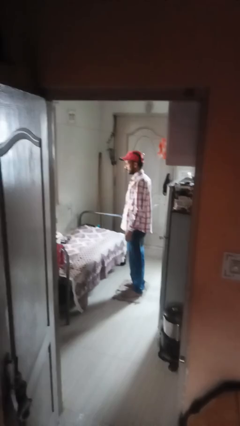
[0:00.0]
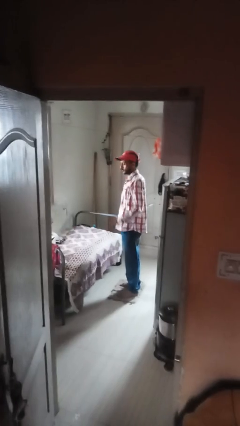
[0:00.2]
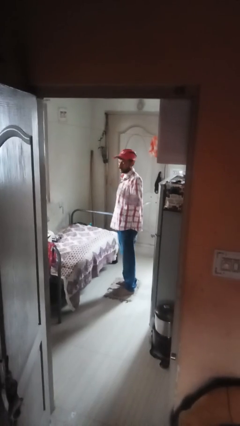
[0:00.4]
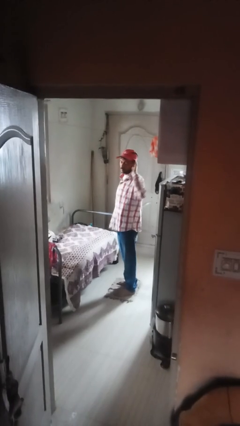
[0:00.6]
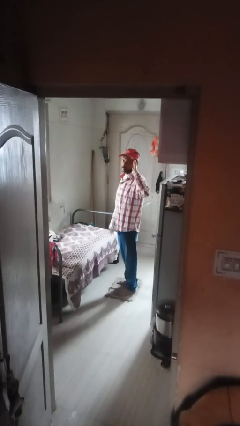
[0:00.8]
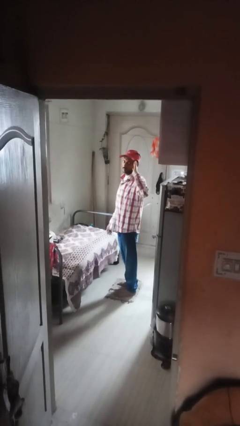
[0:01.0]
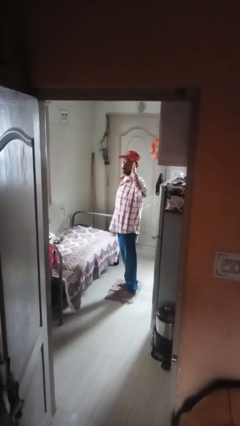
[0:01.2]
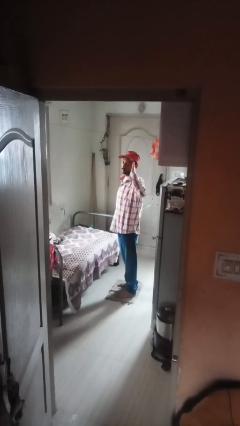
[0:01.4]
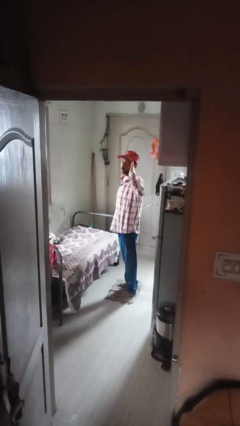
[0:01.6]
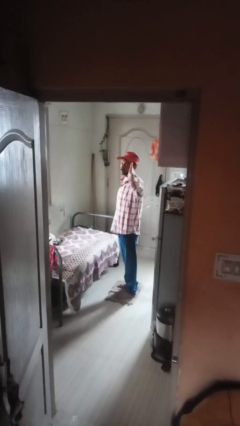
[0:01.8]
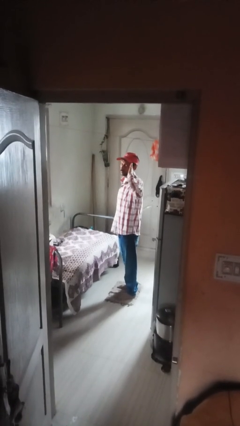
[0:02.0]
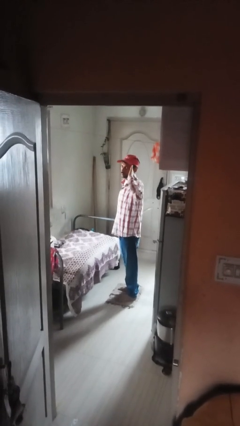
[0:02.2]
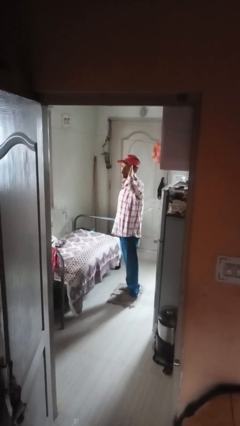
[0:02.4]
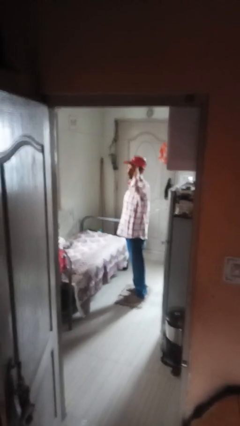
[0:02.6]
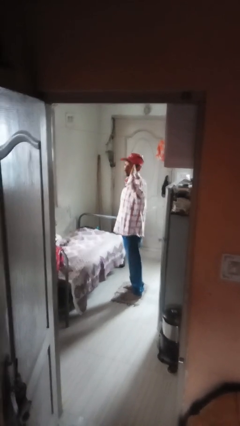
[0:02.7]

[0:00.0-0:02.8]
person salutes

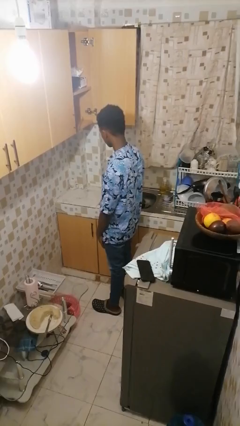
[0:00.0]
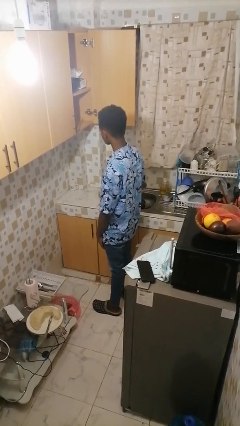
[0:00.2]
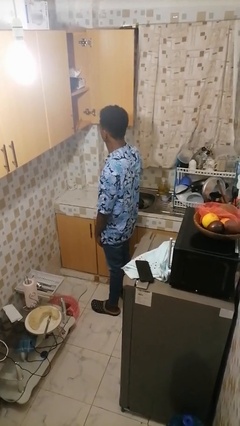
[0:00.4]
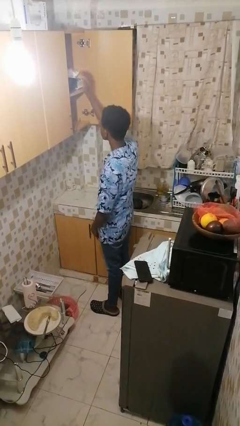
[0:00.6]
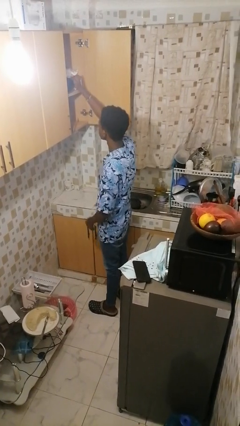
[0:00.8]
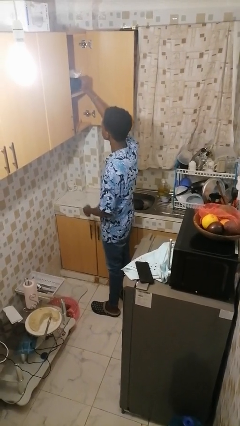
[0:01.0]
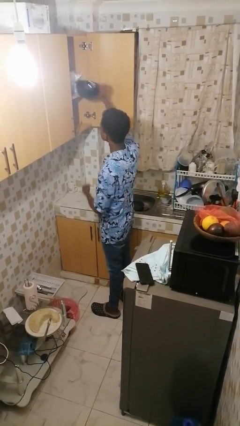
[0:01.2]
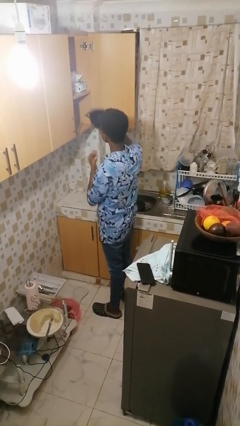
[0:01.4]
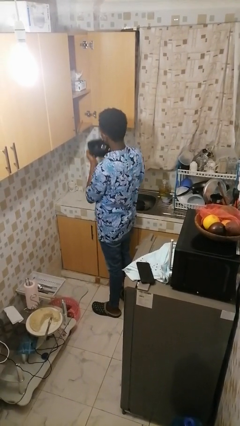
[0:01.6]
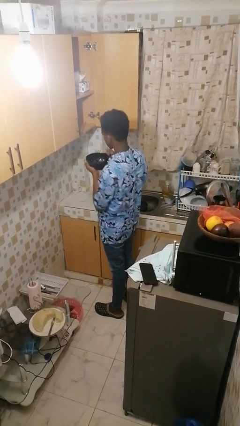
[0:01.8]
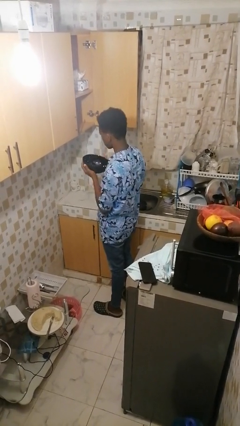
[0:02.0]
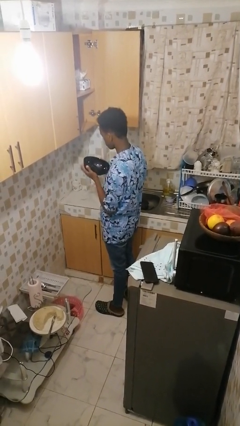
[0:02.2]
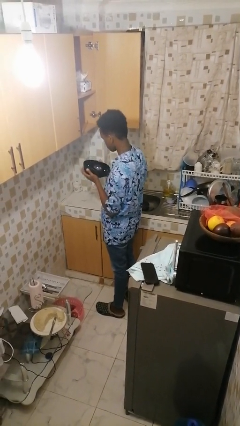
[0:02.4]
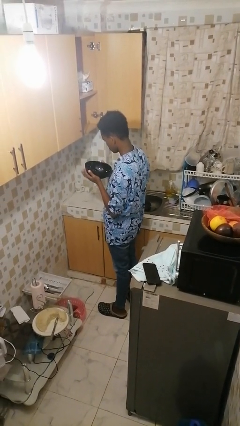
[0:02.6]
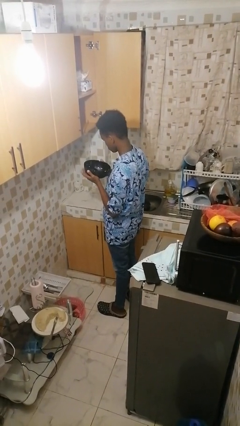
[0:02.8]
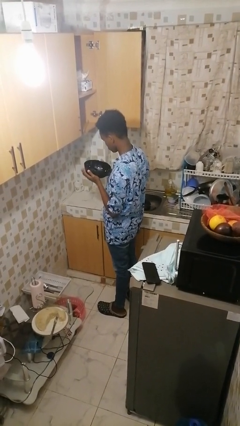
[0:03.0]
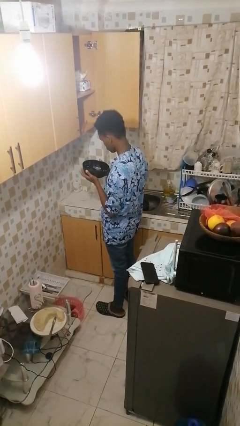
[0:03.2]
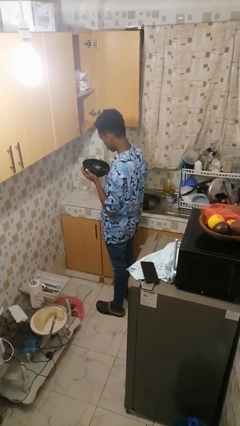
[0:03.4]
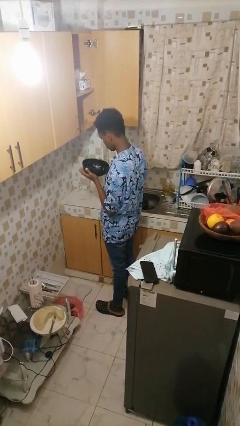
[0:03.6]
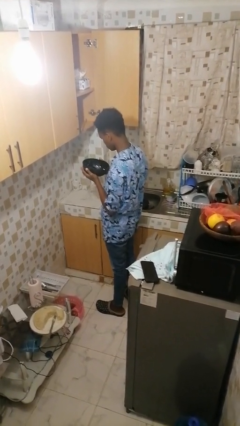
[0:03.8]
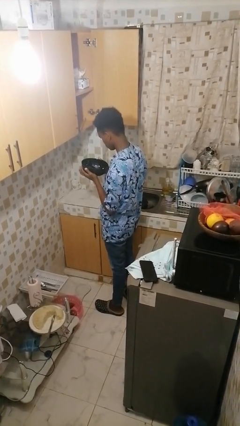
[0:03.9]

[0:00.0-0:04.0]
person picks up object from cabinet

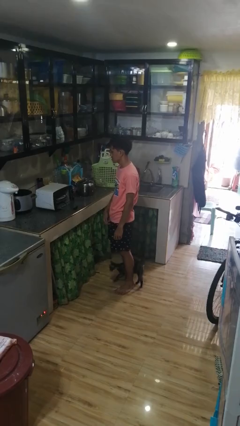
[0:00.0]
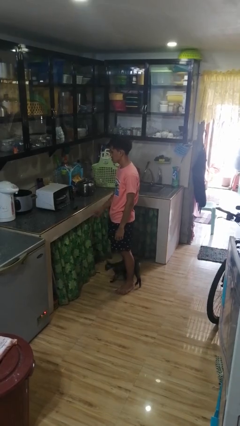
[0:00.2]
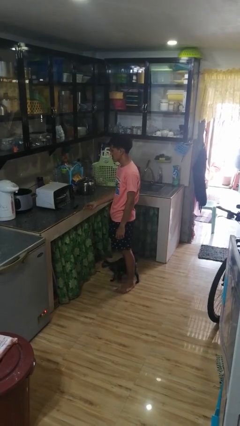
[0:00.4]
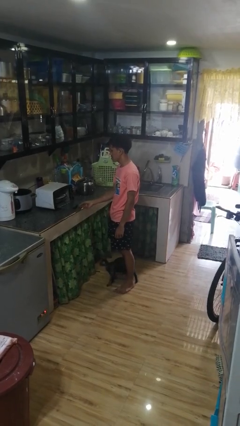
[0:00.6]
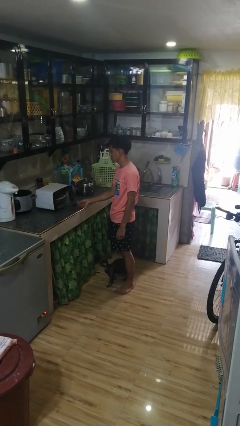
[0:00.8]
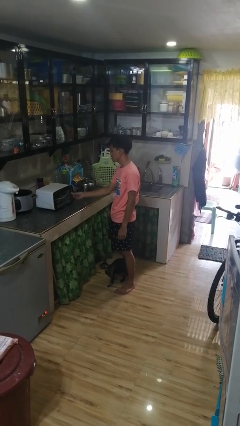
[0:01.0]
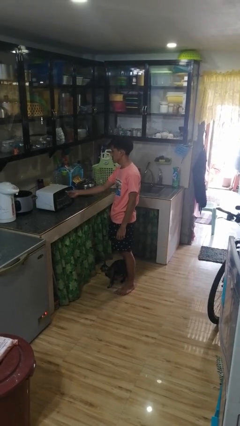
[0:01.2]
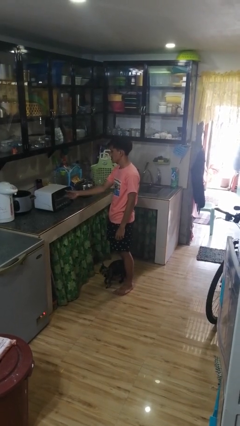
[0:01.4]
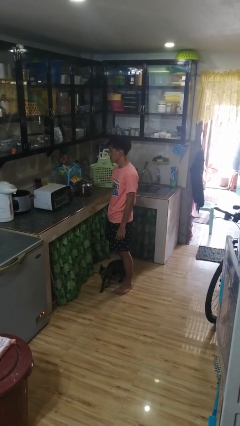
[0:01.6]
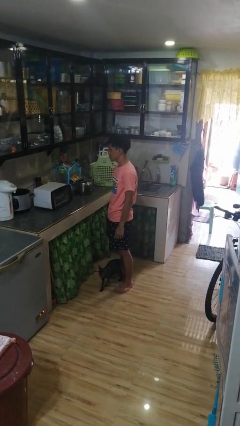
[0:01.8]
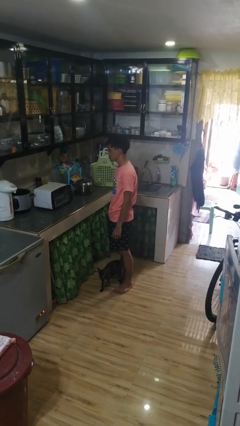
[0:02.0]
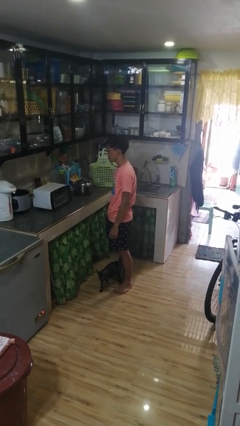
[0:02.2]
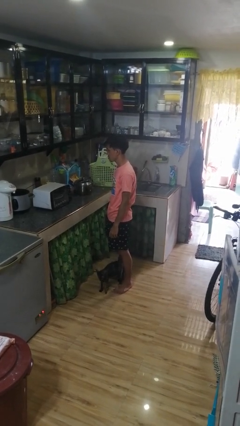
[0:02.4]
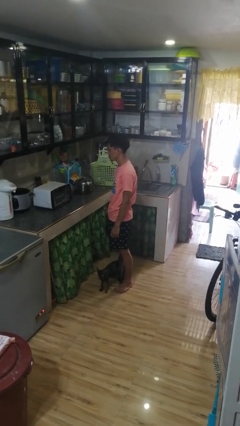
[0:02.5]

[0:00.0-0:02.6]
person closes microwave

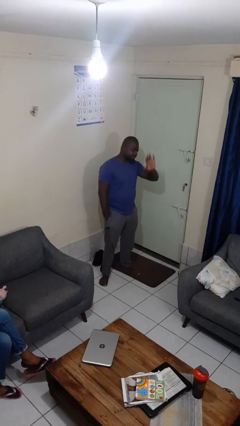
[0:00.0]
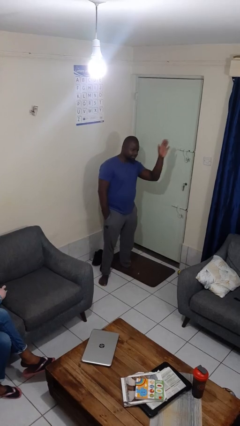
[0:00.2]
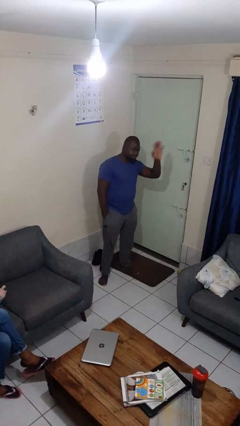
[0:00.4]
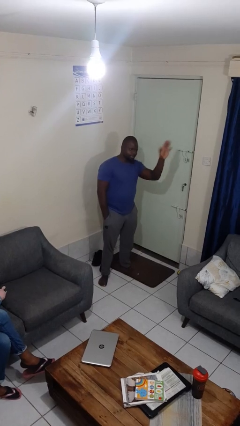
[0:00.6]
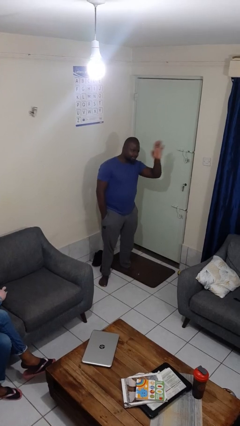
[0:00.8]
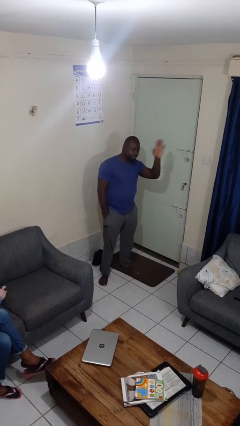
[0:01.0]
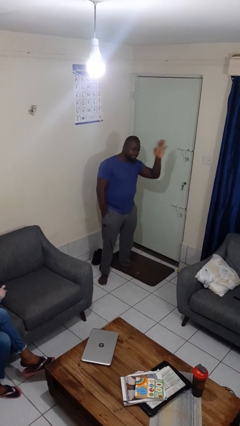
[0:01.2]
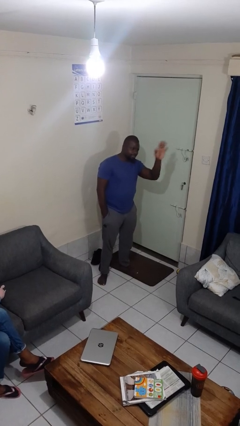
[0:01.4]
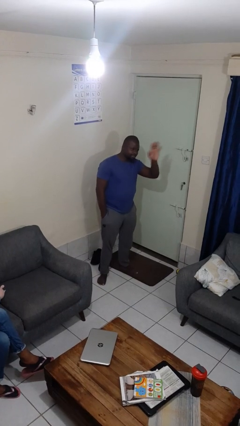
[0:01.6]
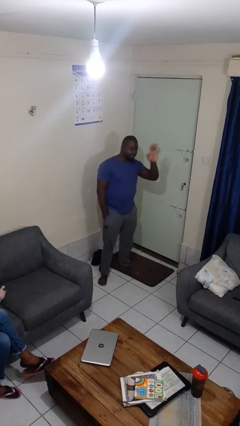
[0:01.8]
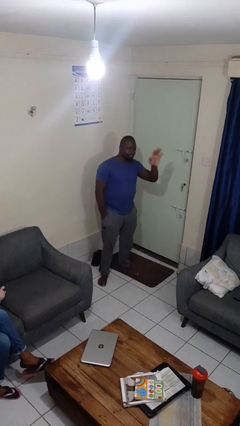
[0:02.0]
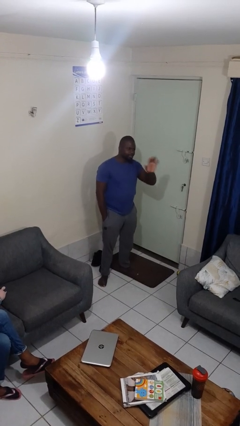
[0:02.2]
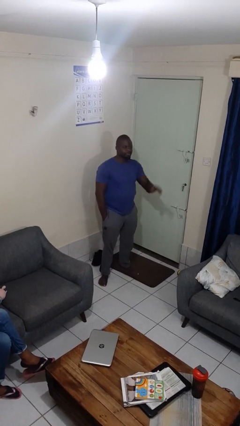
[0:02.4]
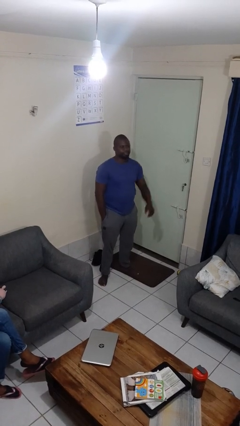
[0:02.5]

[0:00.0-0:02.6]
person waves at person

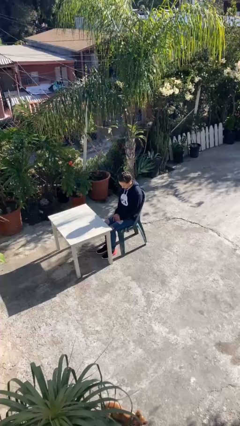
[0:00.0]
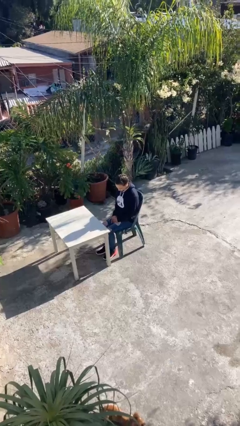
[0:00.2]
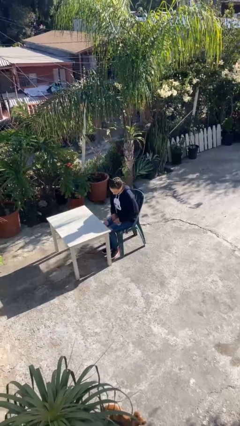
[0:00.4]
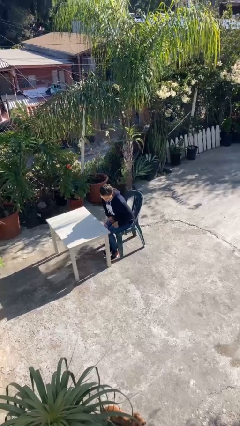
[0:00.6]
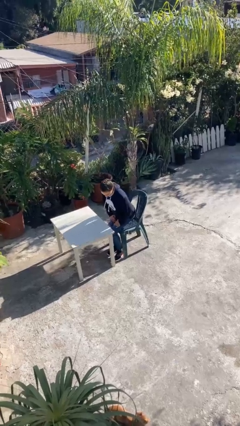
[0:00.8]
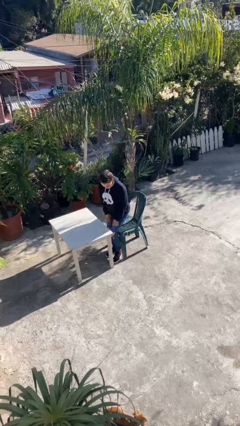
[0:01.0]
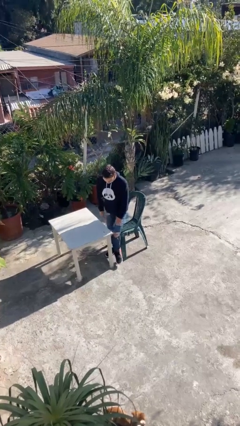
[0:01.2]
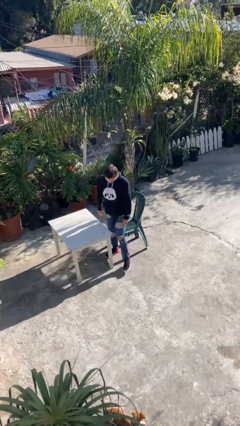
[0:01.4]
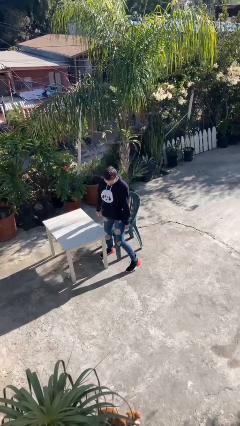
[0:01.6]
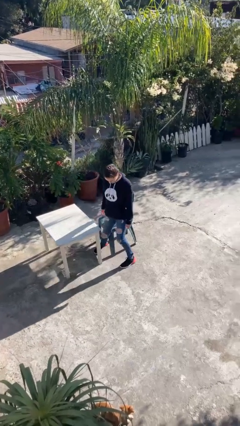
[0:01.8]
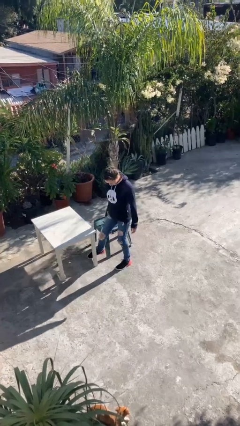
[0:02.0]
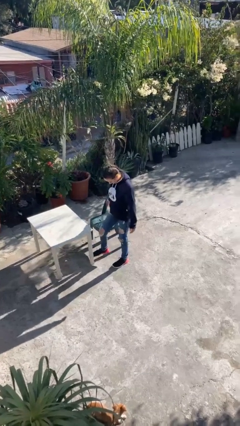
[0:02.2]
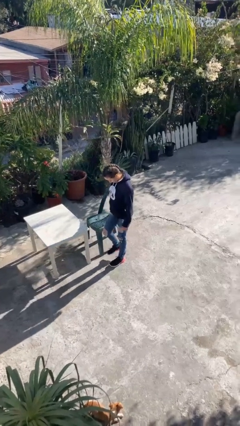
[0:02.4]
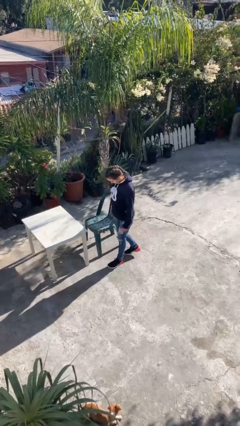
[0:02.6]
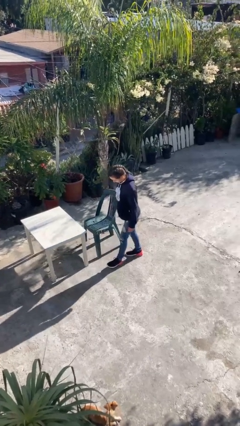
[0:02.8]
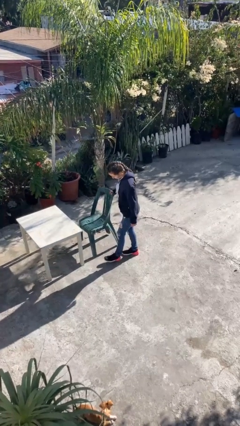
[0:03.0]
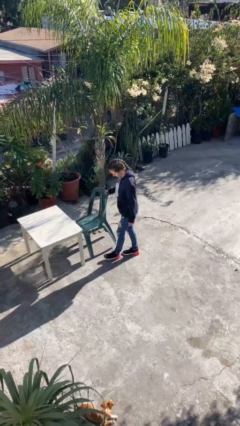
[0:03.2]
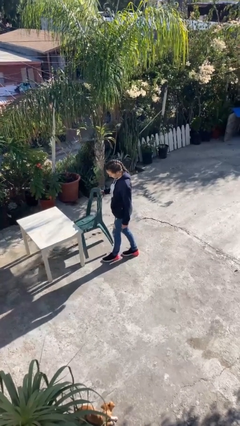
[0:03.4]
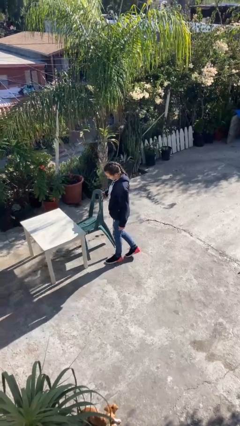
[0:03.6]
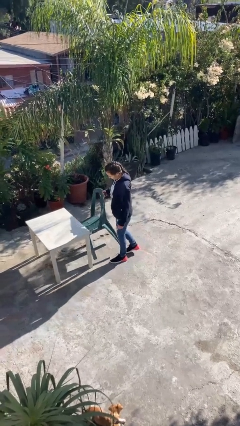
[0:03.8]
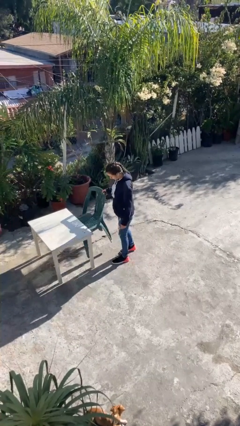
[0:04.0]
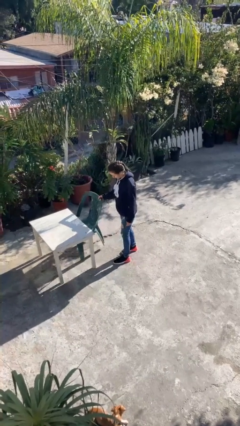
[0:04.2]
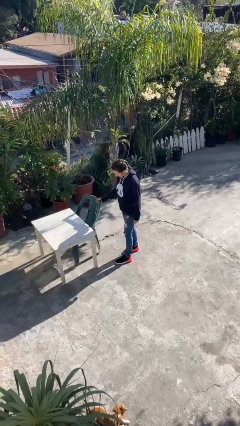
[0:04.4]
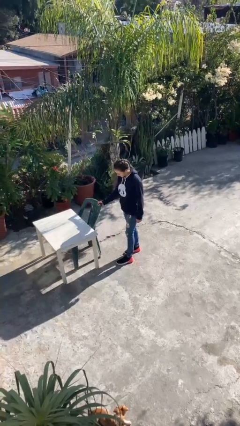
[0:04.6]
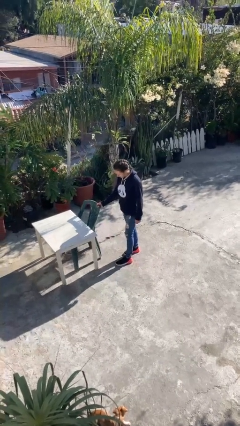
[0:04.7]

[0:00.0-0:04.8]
person stands up

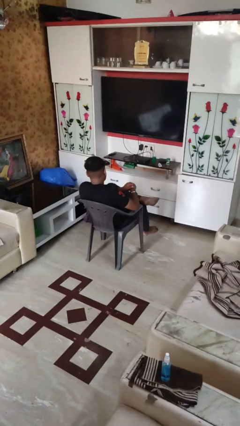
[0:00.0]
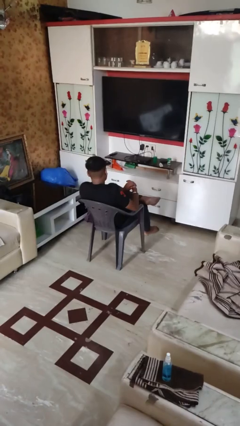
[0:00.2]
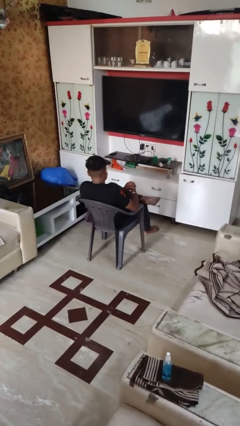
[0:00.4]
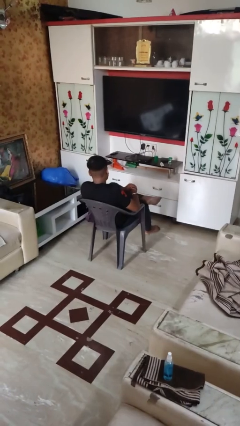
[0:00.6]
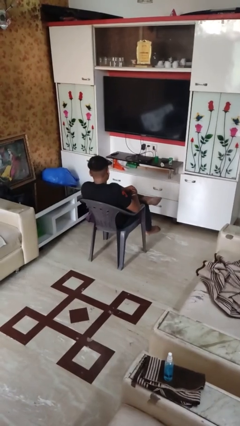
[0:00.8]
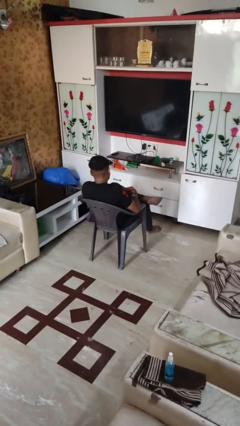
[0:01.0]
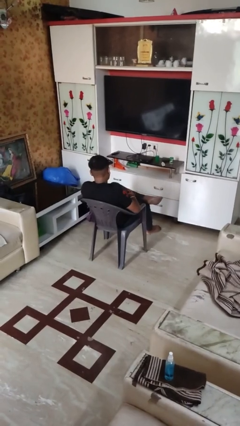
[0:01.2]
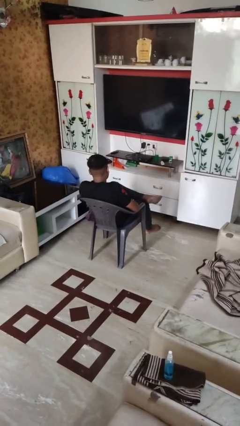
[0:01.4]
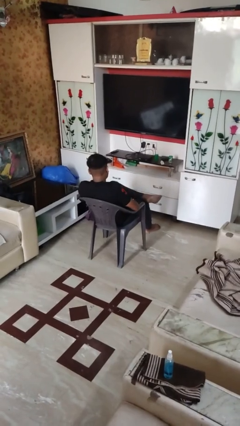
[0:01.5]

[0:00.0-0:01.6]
person swats bug
